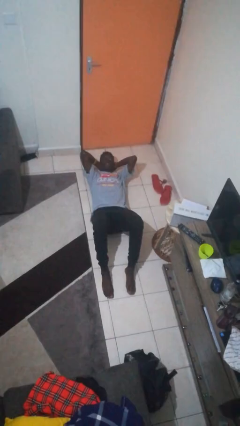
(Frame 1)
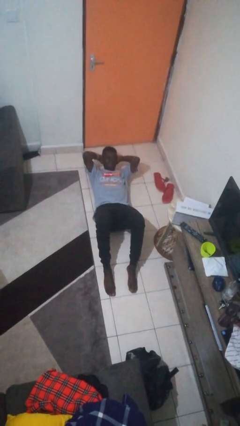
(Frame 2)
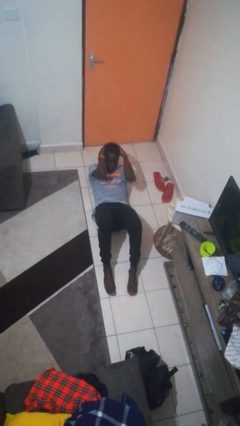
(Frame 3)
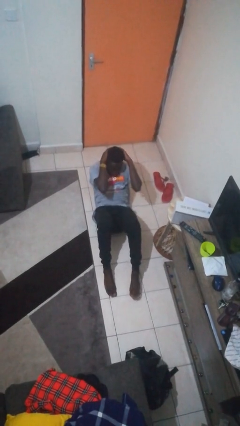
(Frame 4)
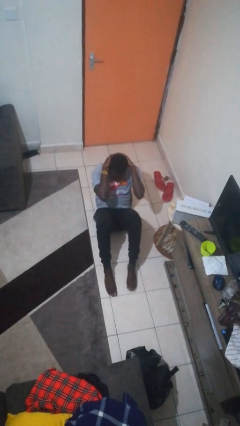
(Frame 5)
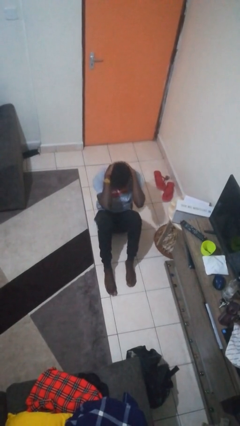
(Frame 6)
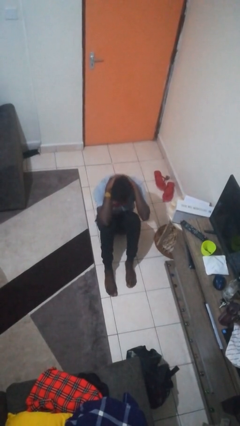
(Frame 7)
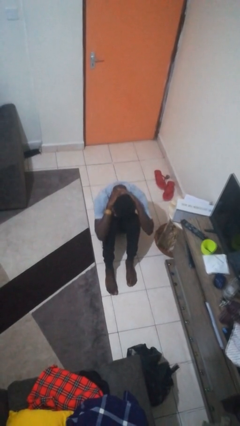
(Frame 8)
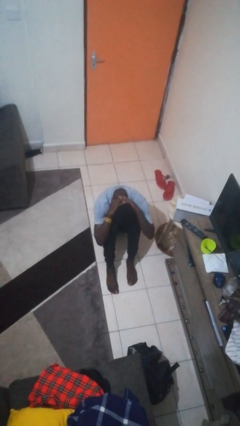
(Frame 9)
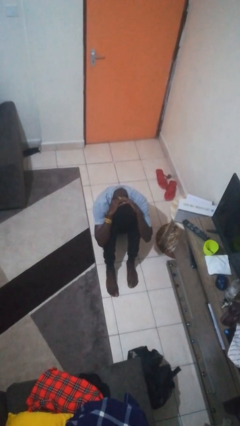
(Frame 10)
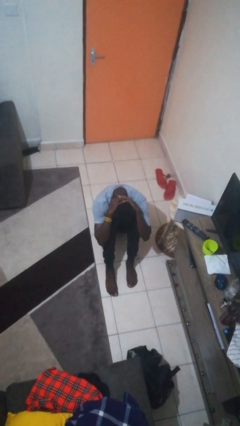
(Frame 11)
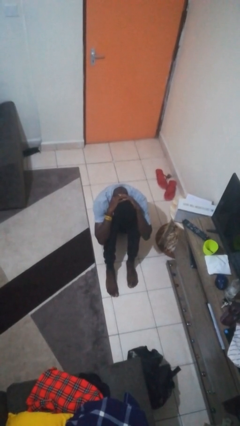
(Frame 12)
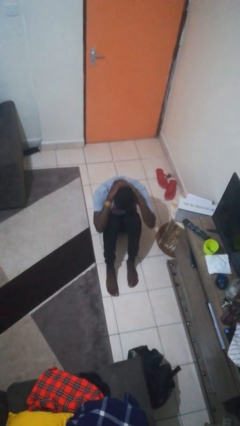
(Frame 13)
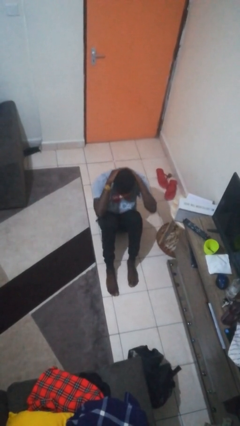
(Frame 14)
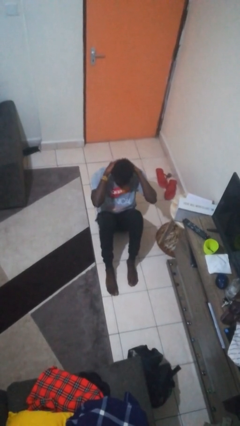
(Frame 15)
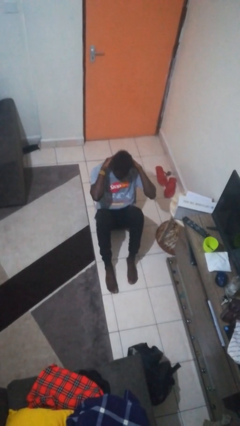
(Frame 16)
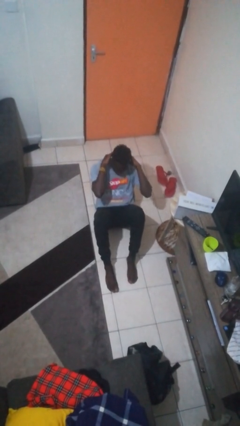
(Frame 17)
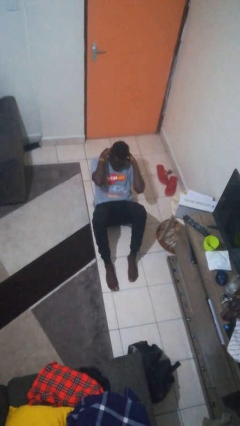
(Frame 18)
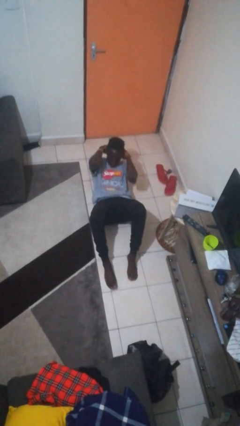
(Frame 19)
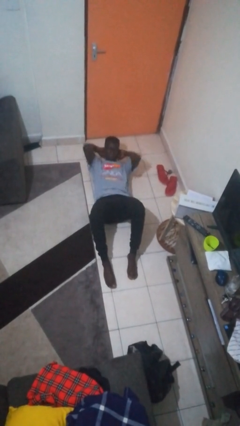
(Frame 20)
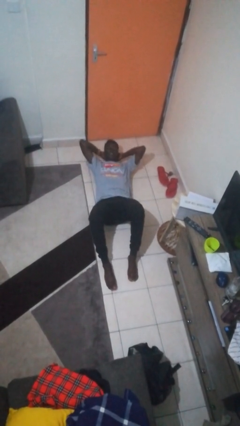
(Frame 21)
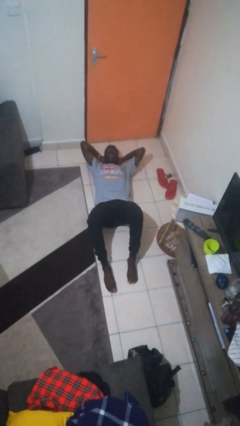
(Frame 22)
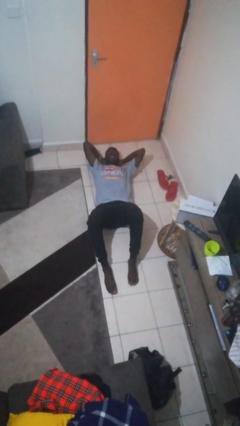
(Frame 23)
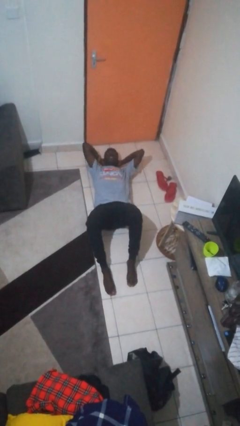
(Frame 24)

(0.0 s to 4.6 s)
person exercises with situp

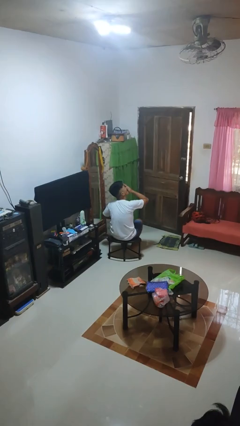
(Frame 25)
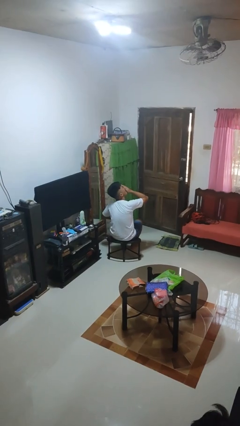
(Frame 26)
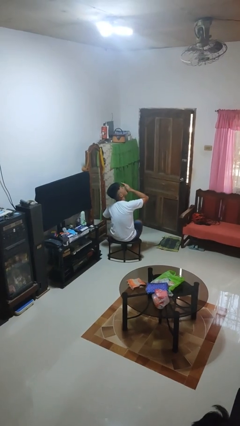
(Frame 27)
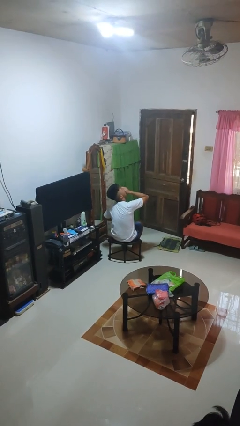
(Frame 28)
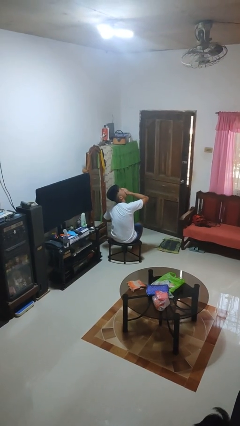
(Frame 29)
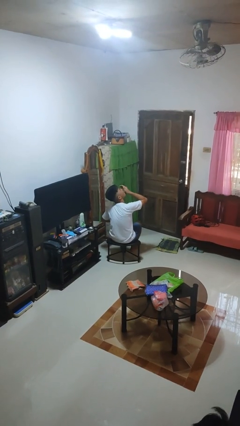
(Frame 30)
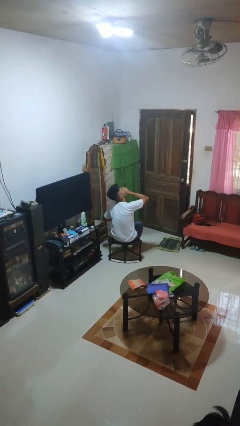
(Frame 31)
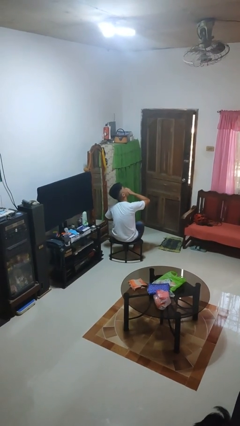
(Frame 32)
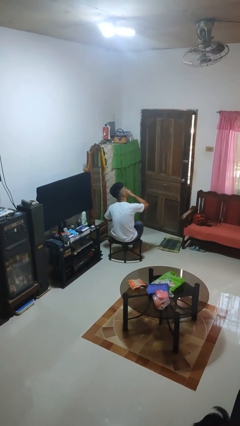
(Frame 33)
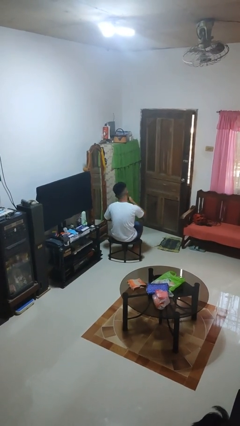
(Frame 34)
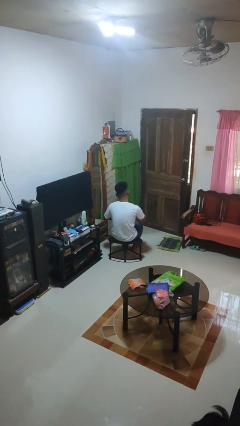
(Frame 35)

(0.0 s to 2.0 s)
person yawns

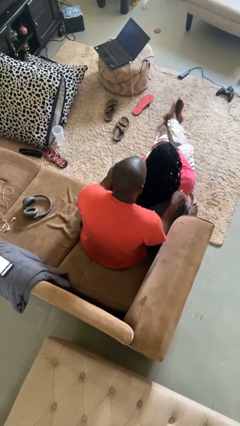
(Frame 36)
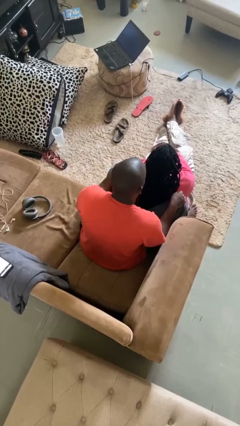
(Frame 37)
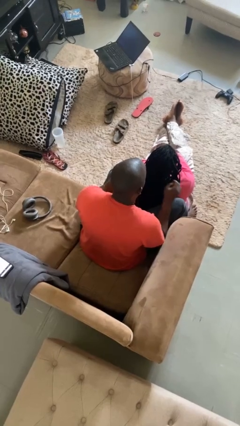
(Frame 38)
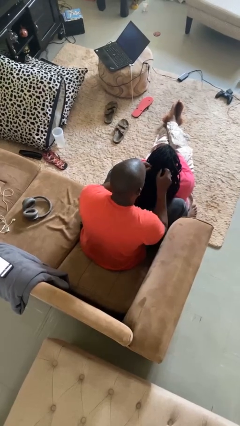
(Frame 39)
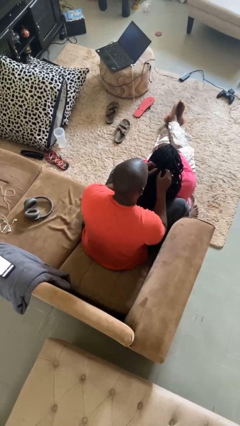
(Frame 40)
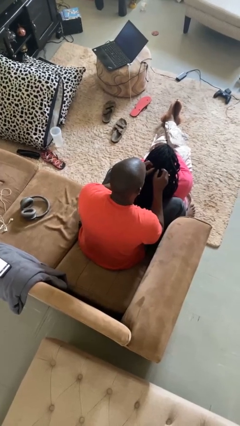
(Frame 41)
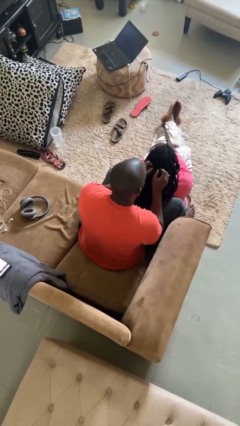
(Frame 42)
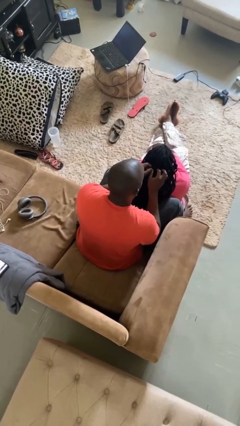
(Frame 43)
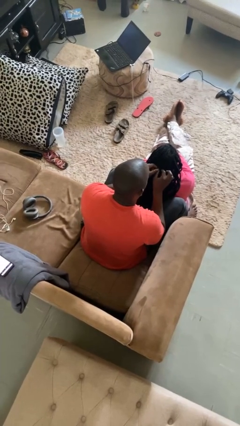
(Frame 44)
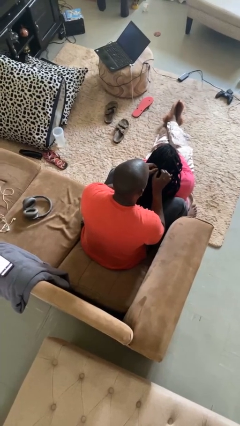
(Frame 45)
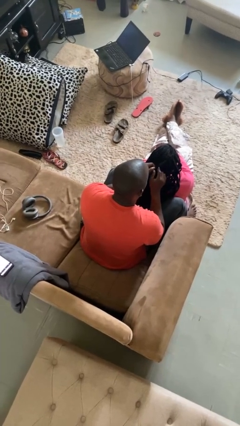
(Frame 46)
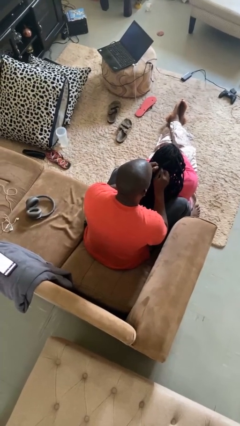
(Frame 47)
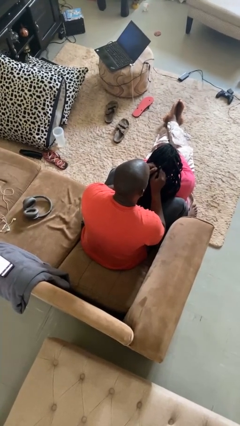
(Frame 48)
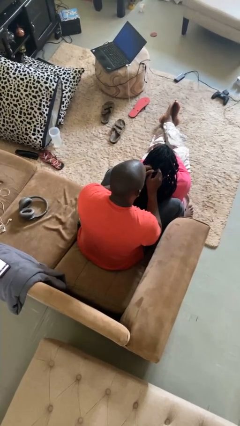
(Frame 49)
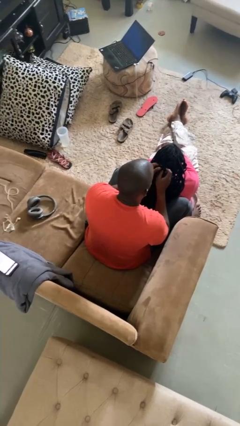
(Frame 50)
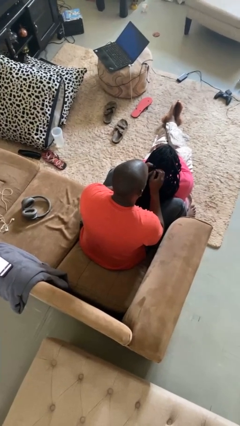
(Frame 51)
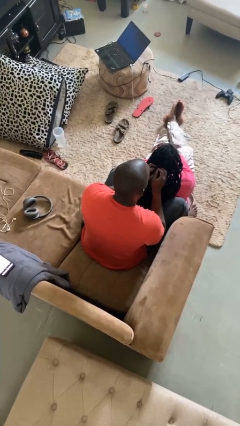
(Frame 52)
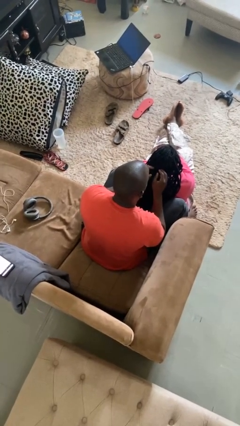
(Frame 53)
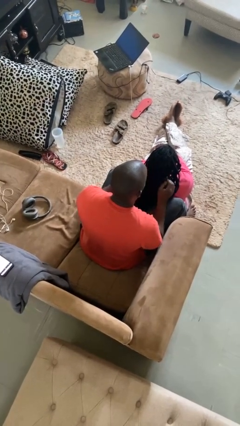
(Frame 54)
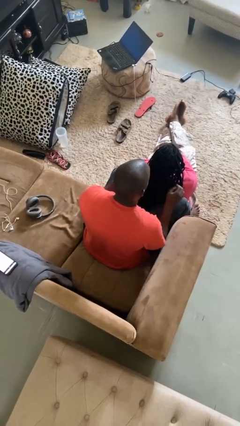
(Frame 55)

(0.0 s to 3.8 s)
person braids hair of person

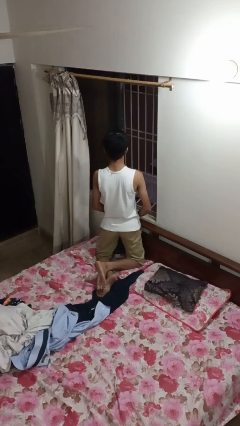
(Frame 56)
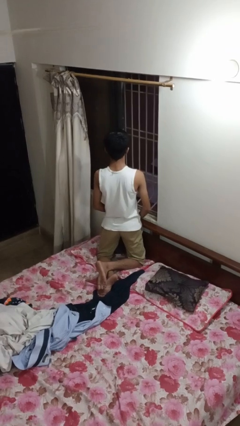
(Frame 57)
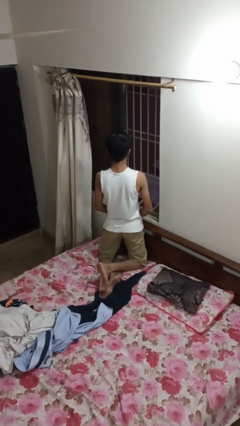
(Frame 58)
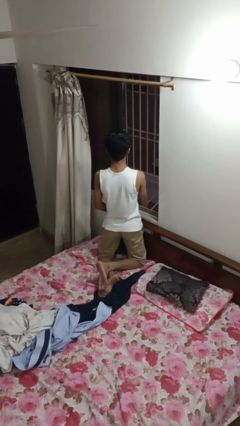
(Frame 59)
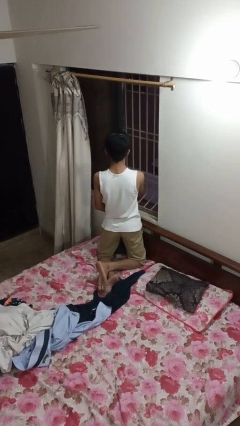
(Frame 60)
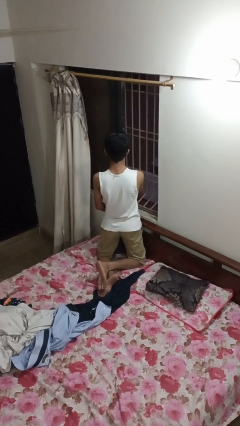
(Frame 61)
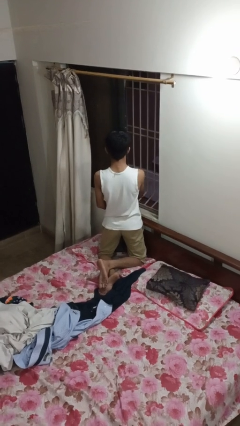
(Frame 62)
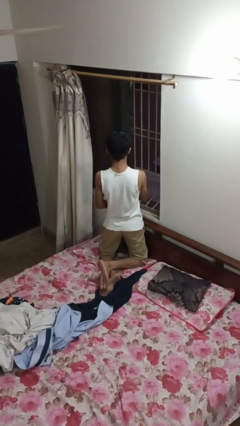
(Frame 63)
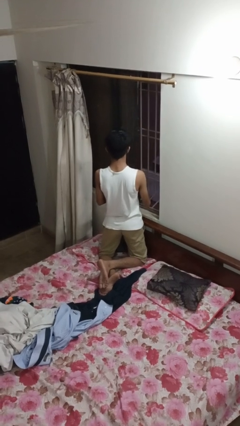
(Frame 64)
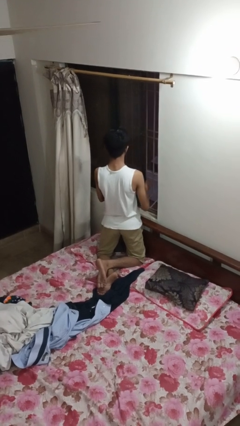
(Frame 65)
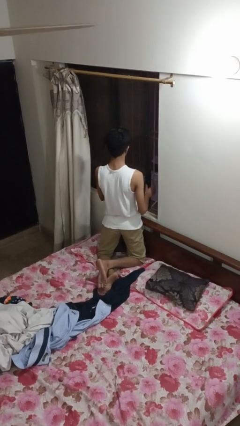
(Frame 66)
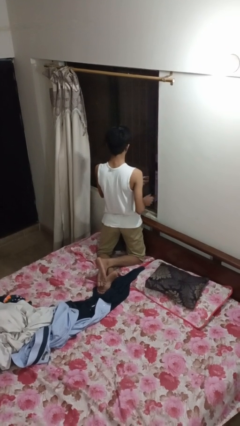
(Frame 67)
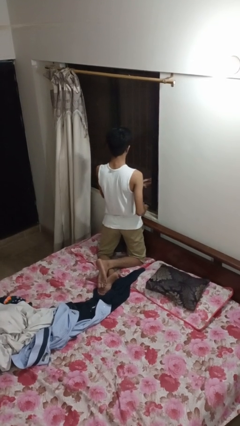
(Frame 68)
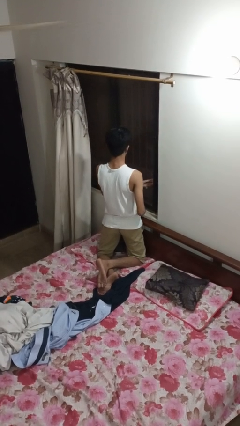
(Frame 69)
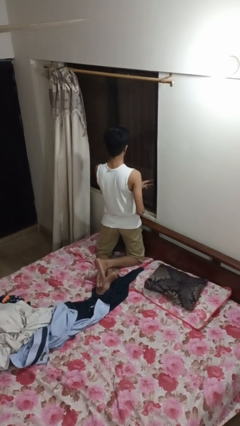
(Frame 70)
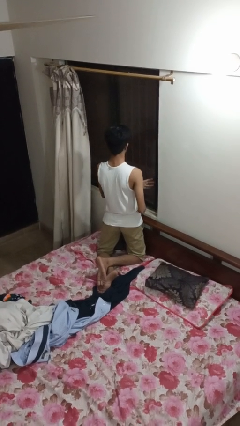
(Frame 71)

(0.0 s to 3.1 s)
person closes home window

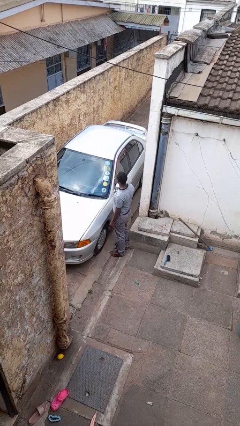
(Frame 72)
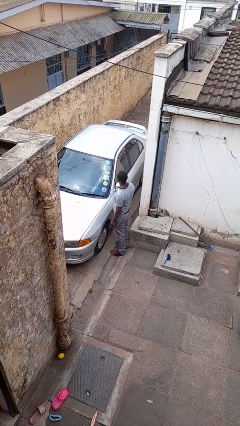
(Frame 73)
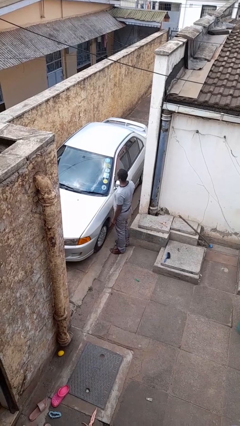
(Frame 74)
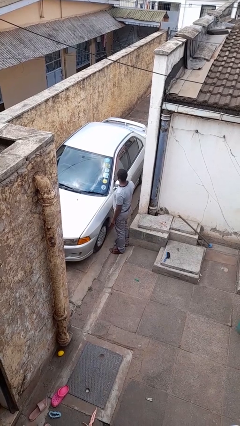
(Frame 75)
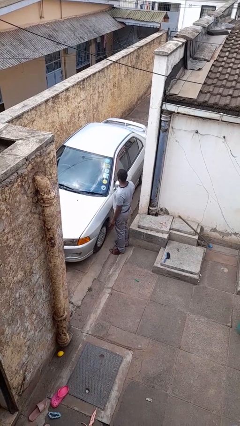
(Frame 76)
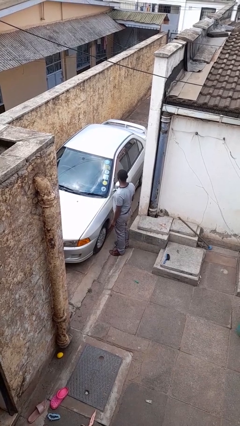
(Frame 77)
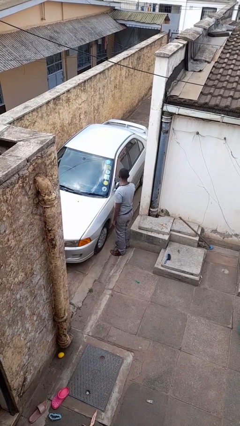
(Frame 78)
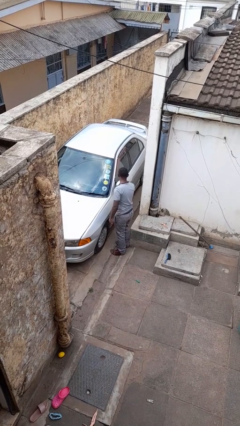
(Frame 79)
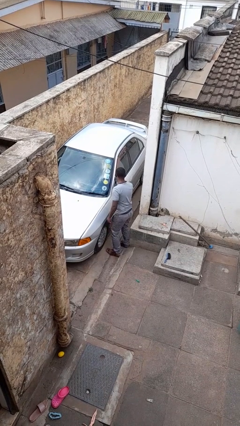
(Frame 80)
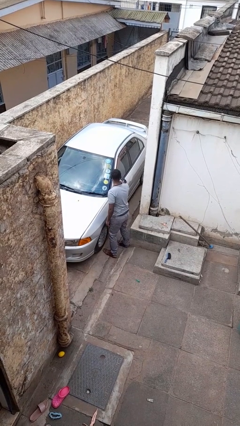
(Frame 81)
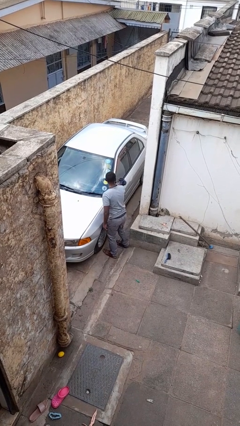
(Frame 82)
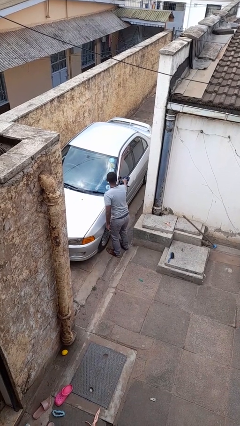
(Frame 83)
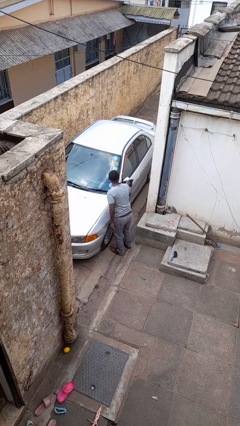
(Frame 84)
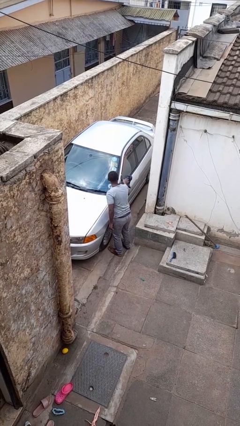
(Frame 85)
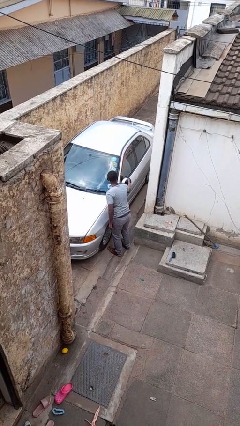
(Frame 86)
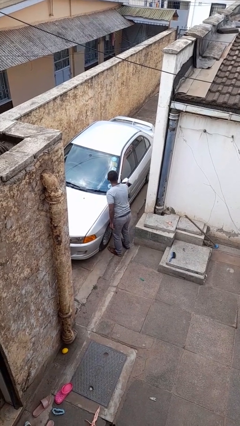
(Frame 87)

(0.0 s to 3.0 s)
person polishes car with rag

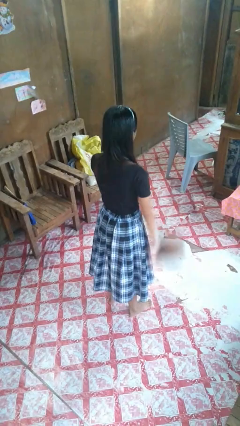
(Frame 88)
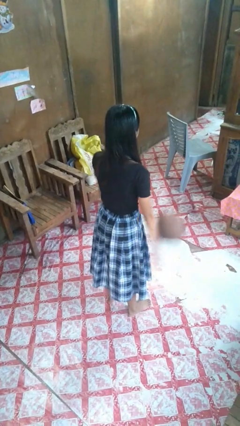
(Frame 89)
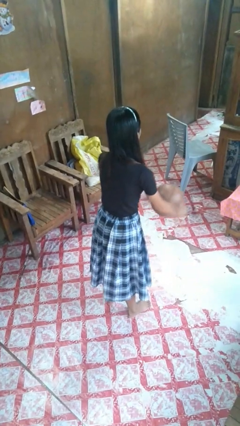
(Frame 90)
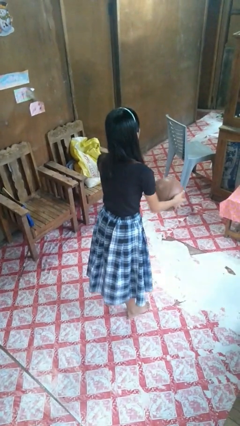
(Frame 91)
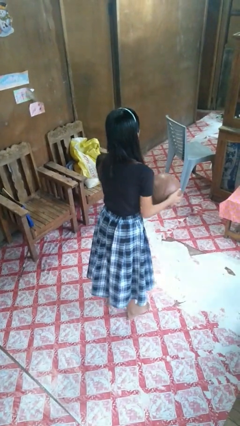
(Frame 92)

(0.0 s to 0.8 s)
person bounces ball on floor
